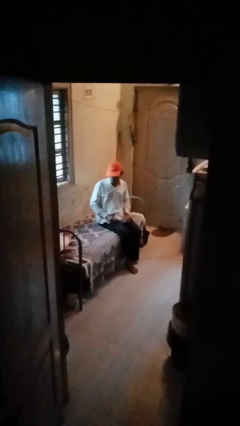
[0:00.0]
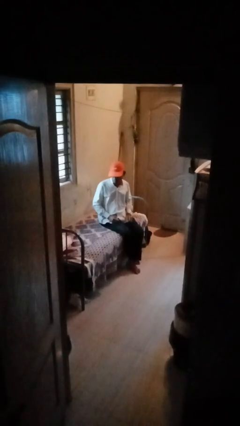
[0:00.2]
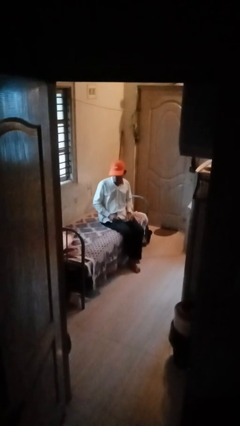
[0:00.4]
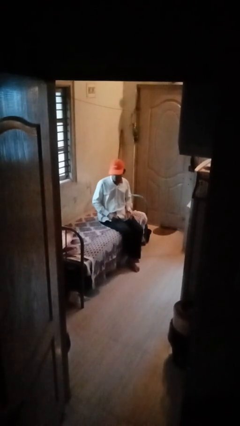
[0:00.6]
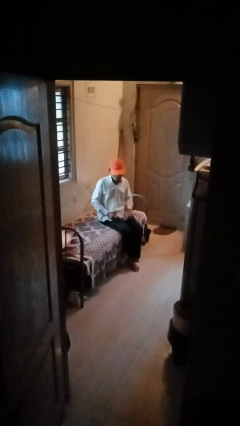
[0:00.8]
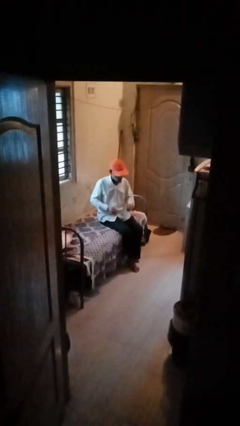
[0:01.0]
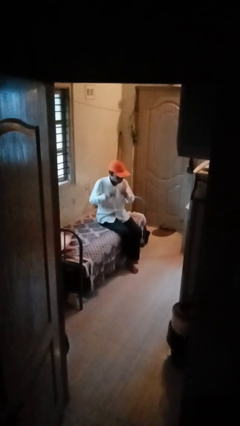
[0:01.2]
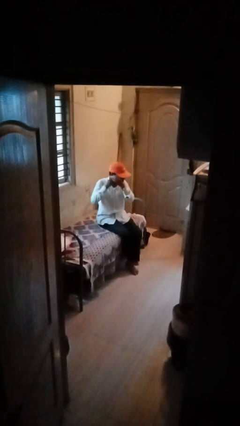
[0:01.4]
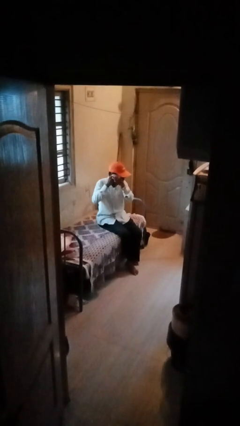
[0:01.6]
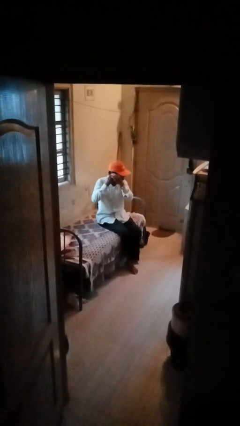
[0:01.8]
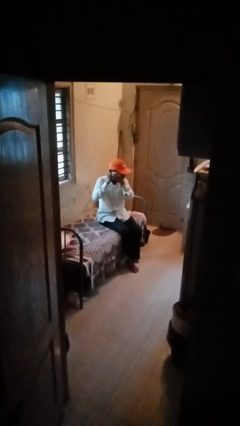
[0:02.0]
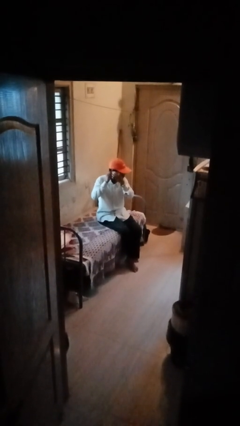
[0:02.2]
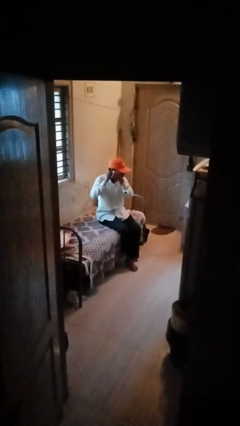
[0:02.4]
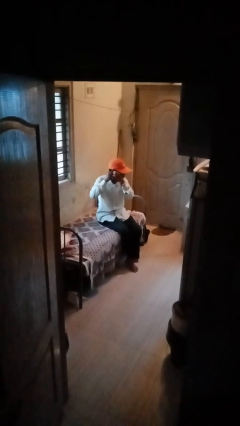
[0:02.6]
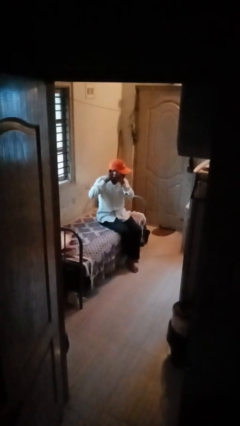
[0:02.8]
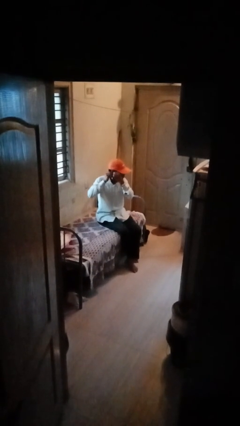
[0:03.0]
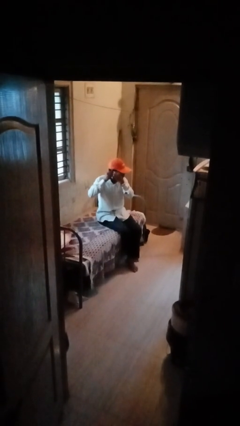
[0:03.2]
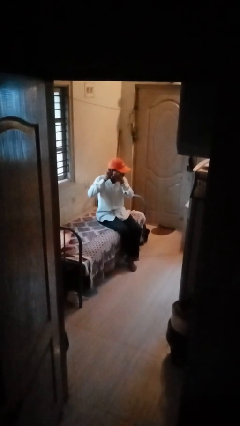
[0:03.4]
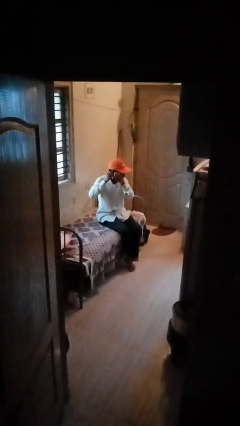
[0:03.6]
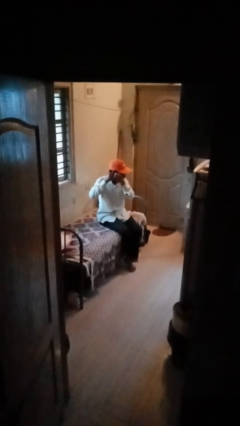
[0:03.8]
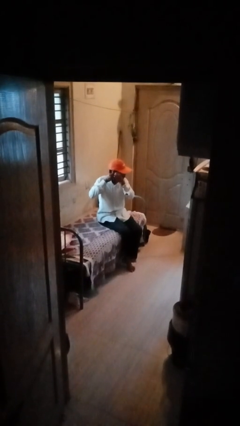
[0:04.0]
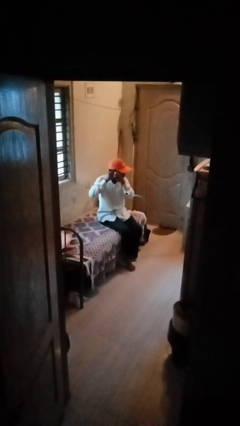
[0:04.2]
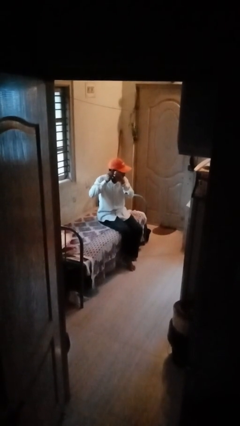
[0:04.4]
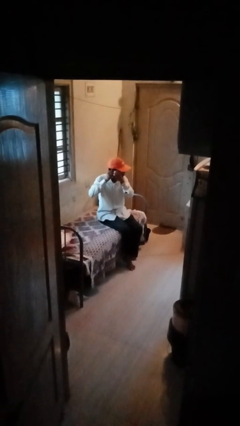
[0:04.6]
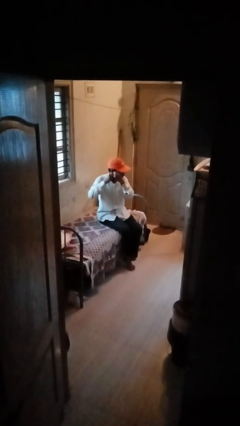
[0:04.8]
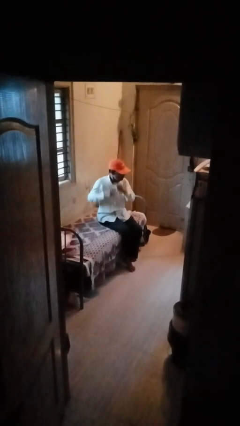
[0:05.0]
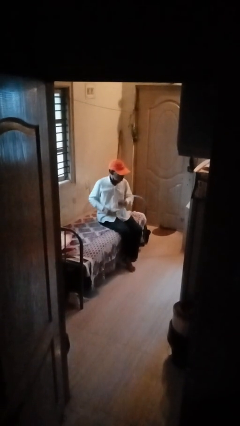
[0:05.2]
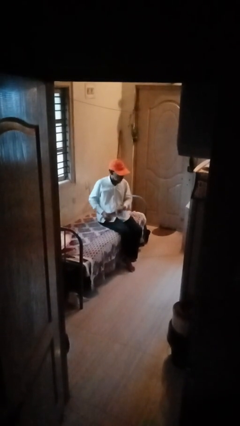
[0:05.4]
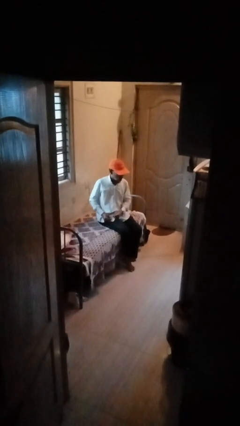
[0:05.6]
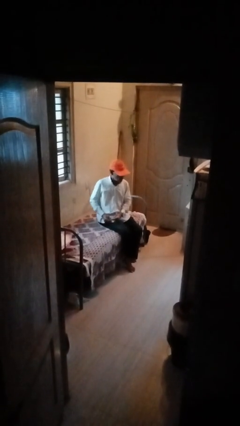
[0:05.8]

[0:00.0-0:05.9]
person puts on earrings

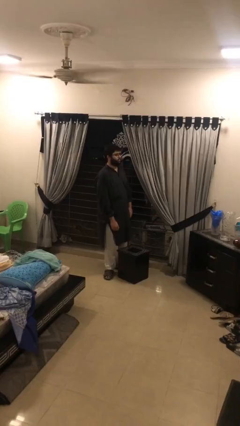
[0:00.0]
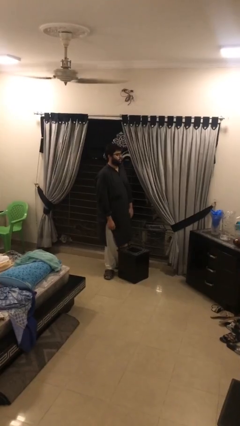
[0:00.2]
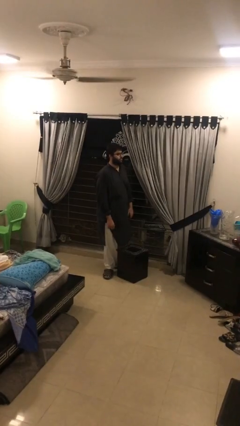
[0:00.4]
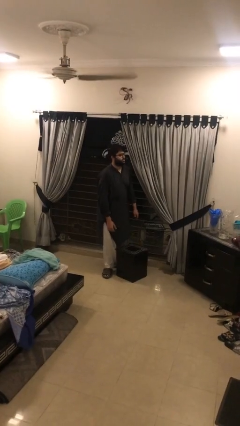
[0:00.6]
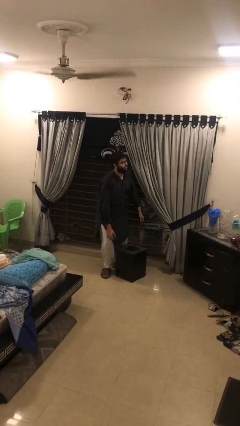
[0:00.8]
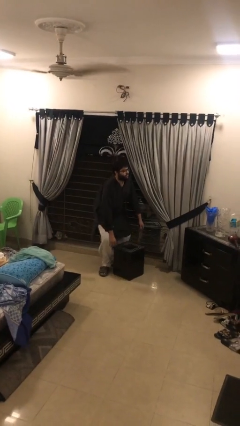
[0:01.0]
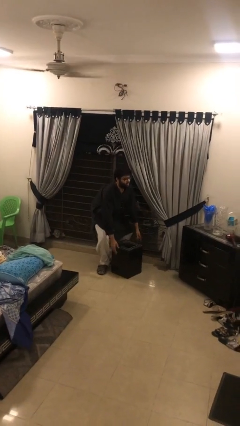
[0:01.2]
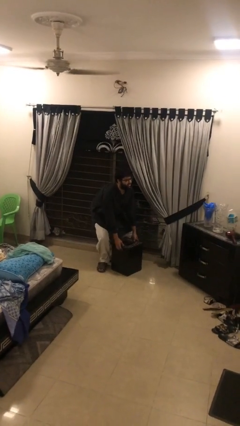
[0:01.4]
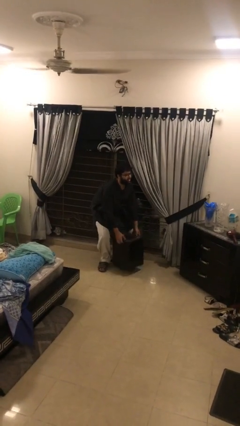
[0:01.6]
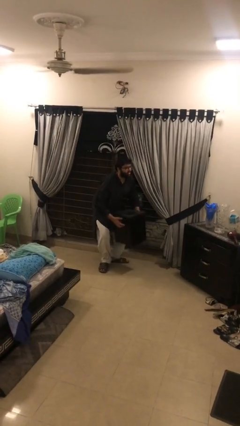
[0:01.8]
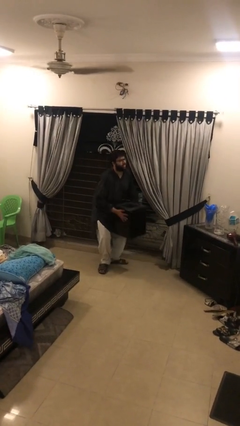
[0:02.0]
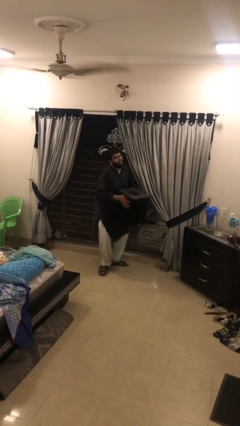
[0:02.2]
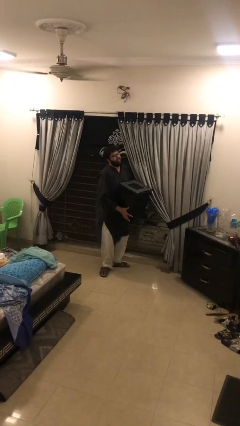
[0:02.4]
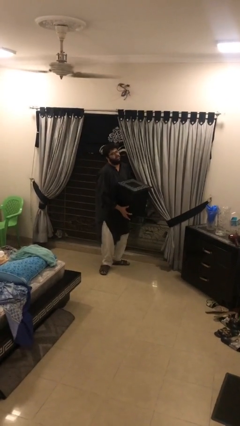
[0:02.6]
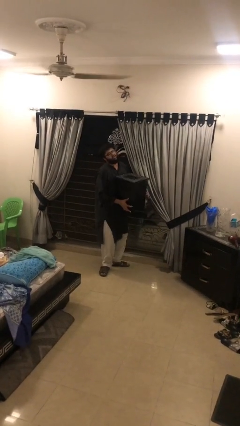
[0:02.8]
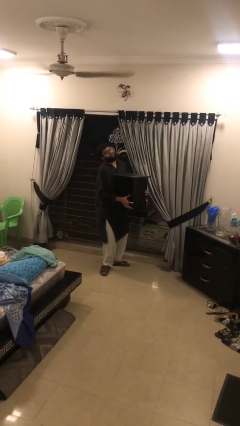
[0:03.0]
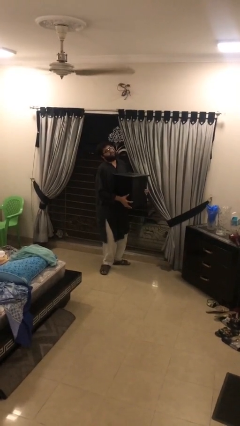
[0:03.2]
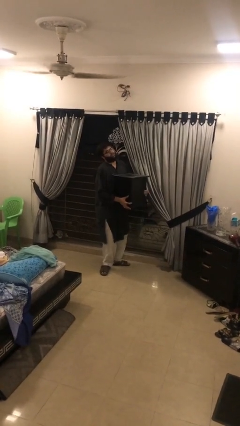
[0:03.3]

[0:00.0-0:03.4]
person picks up object from floor

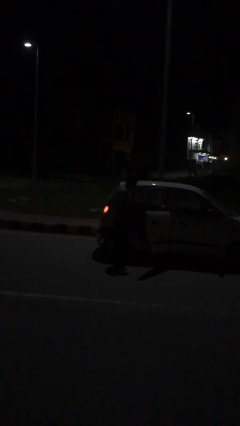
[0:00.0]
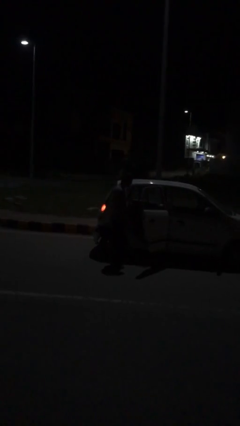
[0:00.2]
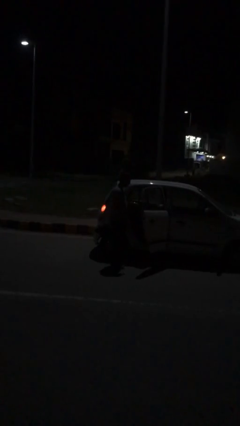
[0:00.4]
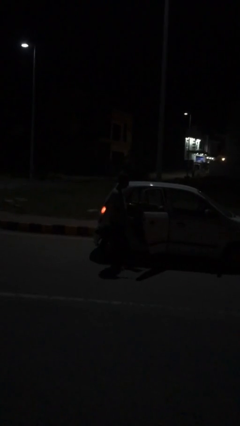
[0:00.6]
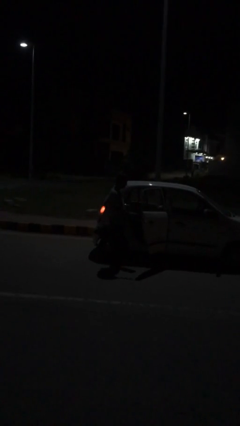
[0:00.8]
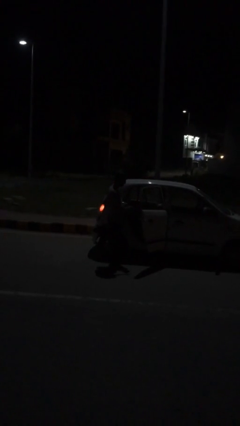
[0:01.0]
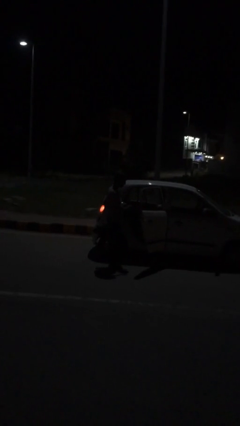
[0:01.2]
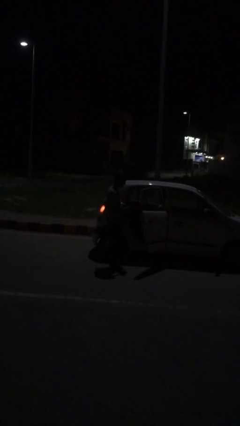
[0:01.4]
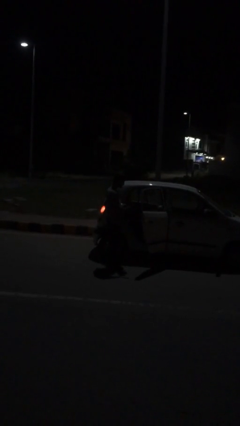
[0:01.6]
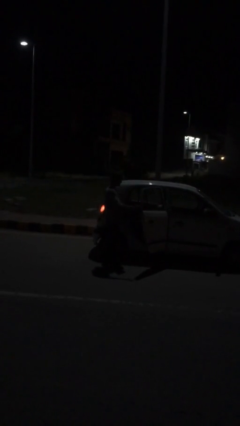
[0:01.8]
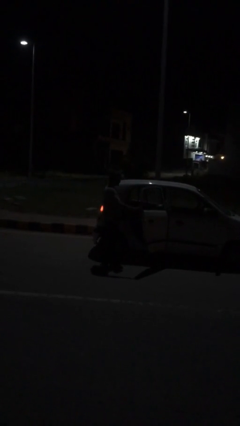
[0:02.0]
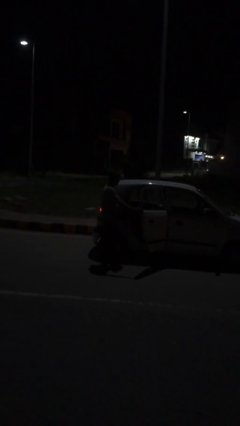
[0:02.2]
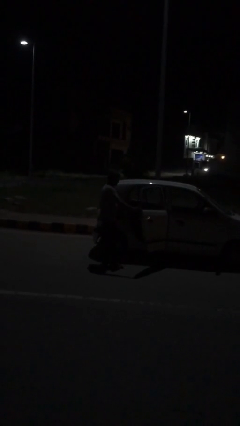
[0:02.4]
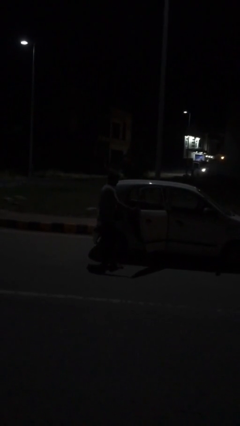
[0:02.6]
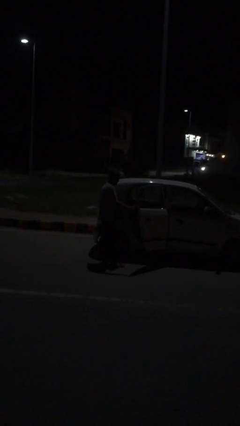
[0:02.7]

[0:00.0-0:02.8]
person unloads car

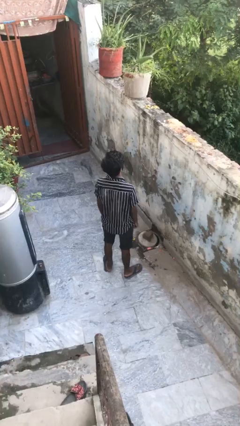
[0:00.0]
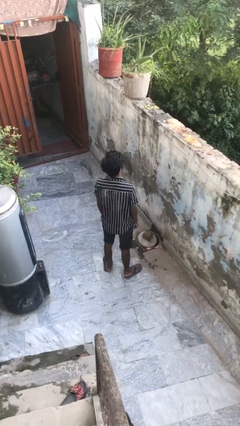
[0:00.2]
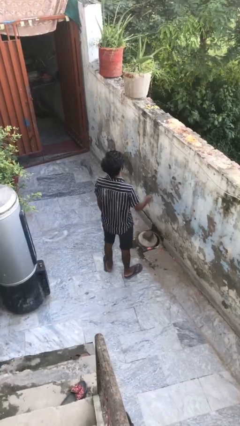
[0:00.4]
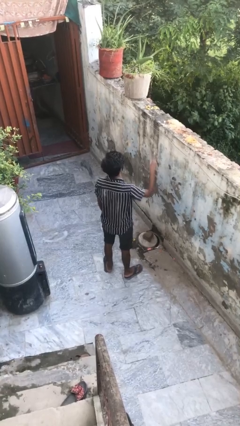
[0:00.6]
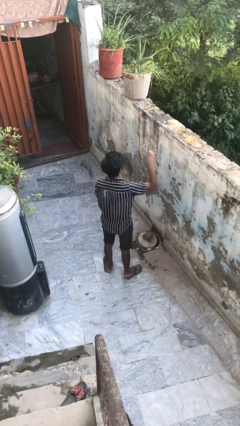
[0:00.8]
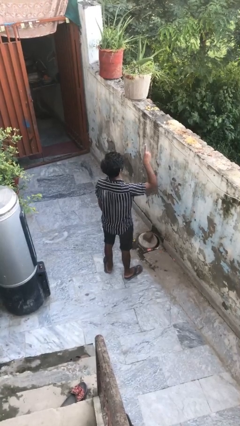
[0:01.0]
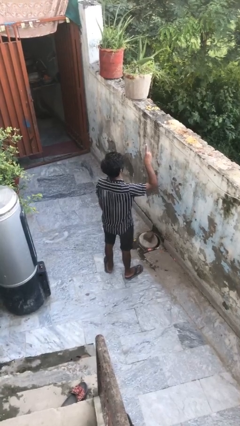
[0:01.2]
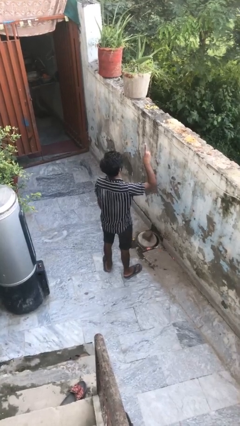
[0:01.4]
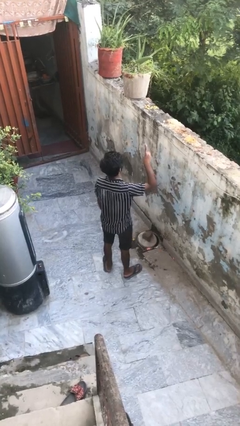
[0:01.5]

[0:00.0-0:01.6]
person gestures number one

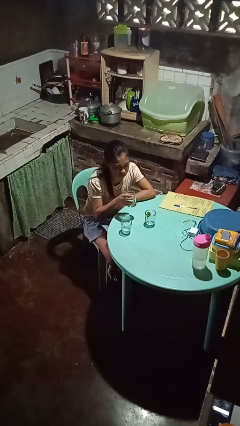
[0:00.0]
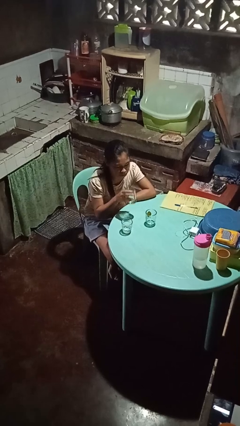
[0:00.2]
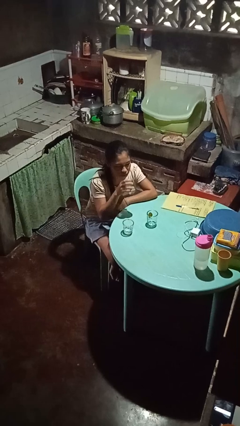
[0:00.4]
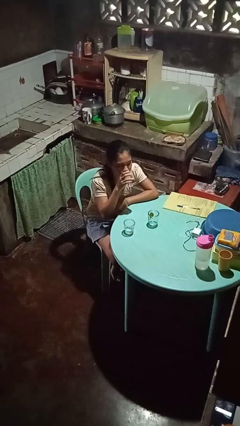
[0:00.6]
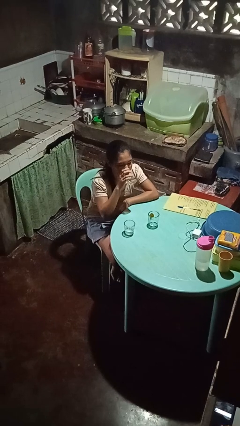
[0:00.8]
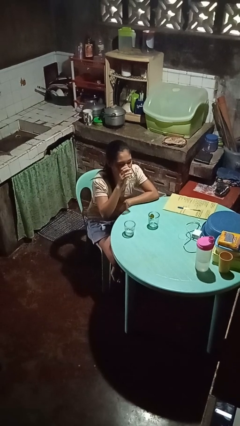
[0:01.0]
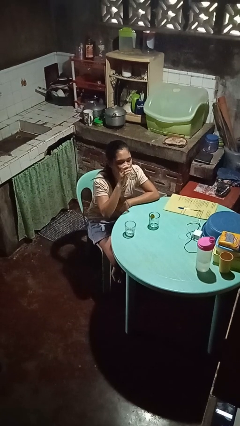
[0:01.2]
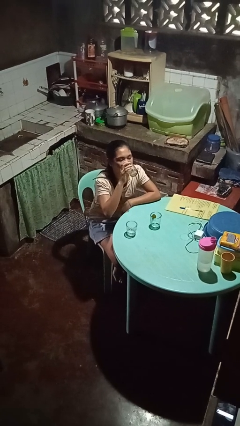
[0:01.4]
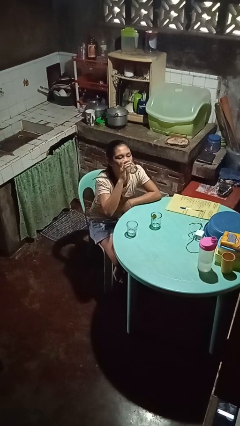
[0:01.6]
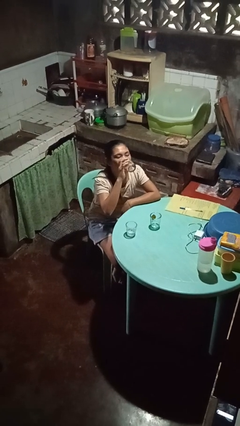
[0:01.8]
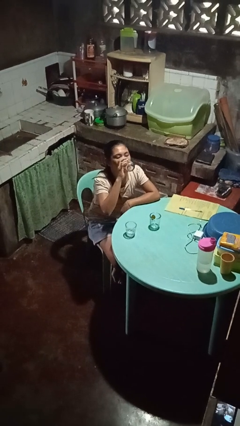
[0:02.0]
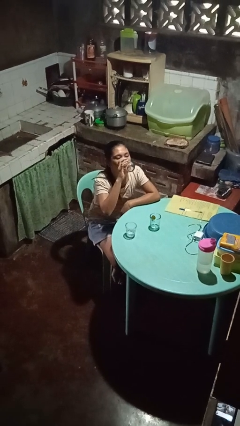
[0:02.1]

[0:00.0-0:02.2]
person drinks from shotglass

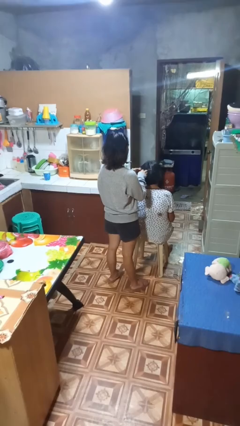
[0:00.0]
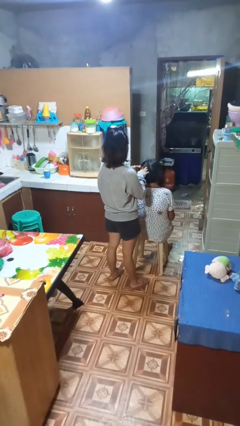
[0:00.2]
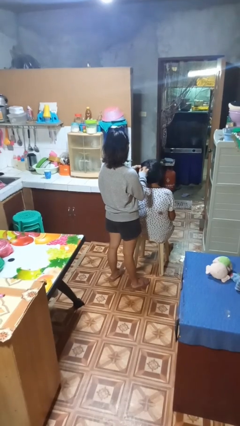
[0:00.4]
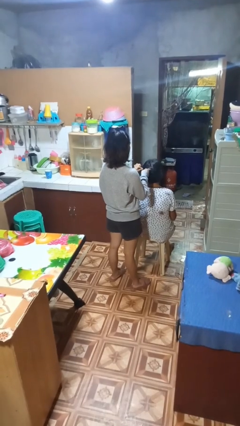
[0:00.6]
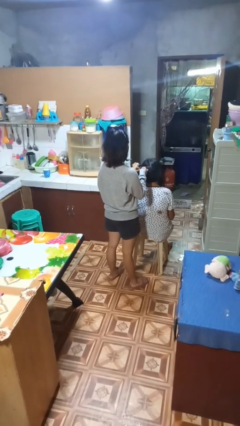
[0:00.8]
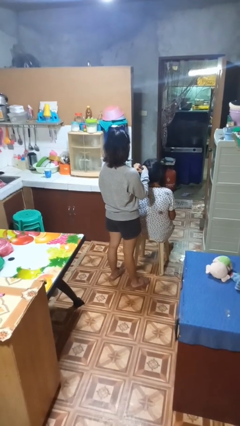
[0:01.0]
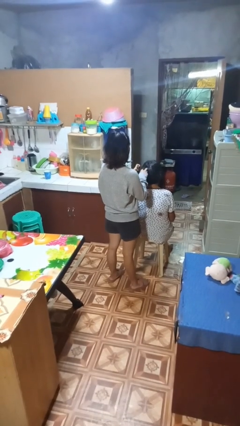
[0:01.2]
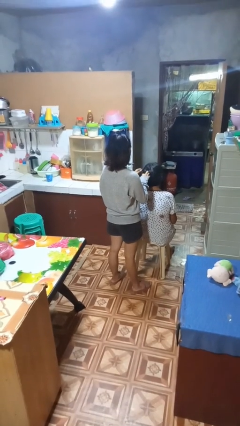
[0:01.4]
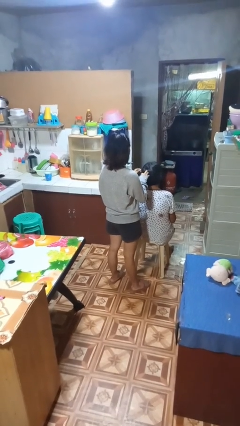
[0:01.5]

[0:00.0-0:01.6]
person braids hair of person

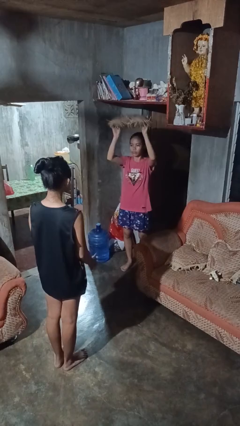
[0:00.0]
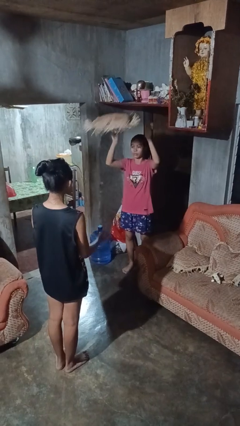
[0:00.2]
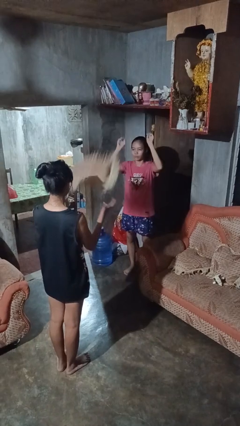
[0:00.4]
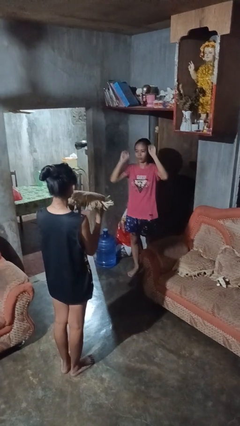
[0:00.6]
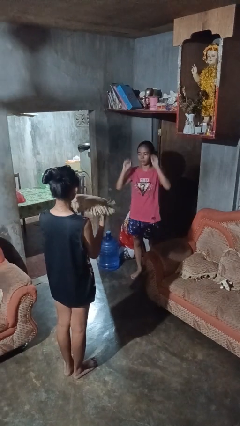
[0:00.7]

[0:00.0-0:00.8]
person throws object to person
